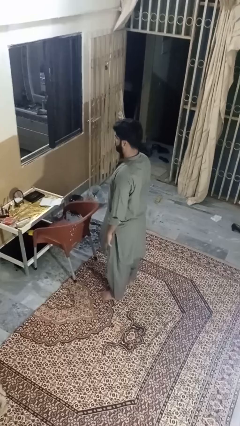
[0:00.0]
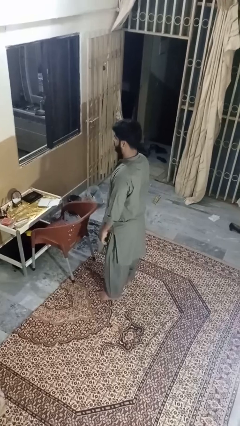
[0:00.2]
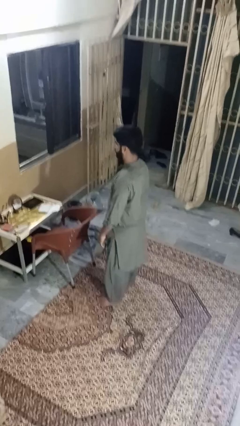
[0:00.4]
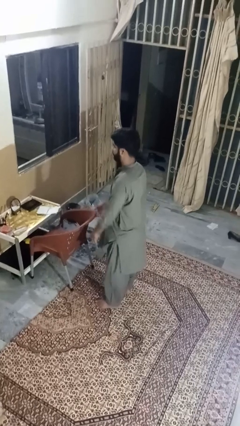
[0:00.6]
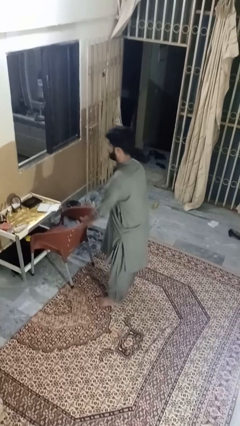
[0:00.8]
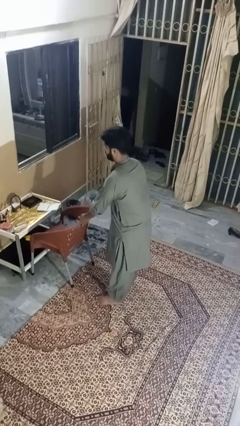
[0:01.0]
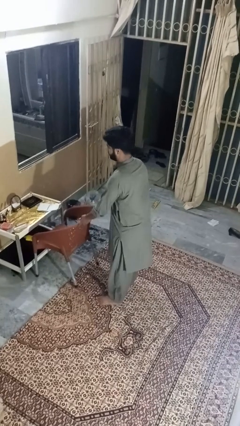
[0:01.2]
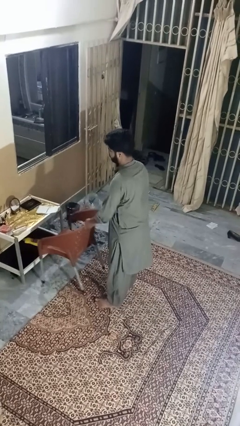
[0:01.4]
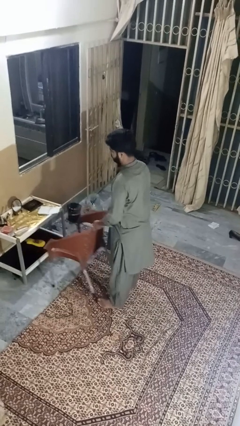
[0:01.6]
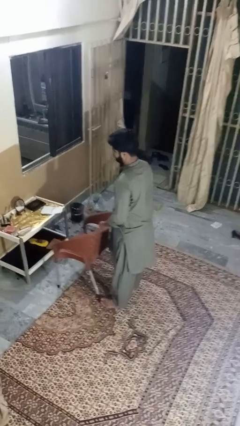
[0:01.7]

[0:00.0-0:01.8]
person pulls out chair

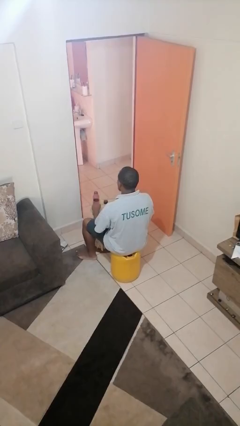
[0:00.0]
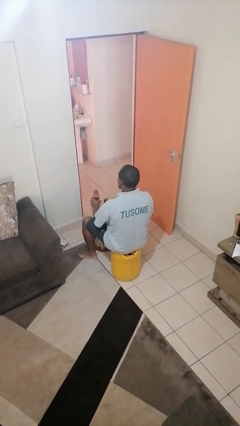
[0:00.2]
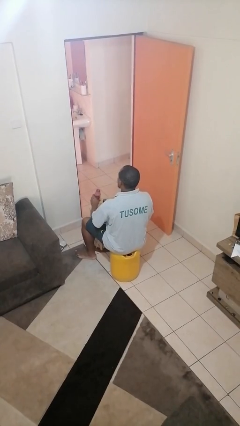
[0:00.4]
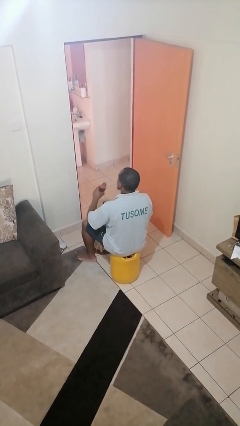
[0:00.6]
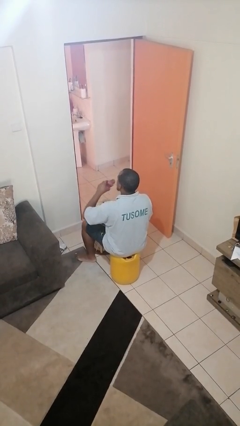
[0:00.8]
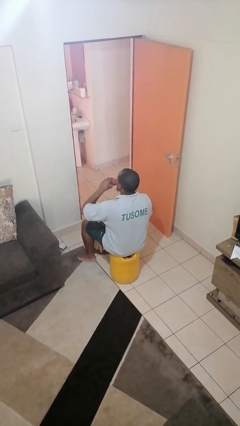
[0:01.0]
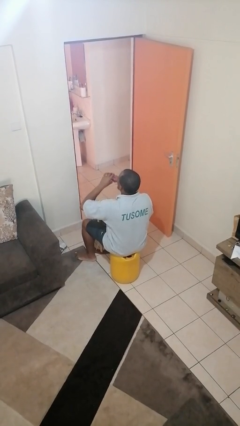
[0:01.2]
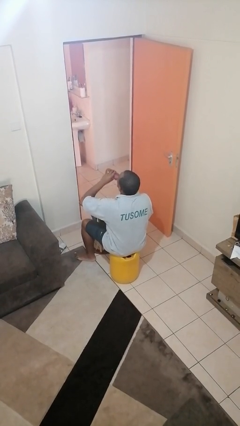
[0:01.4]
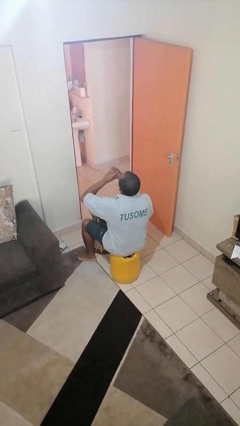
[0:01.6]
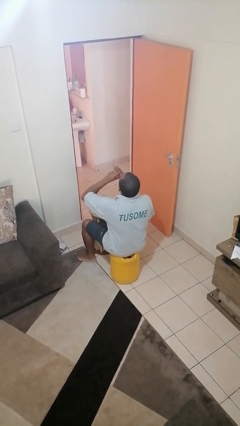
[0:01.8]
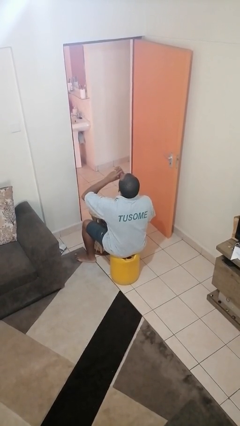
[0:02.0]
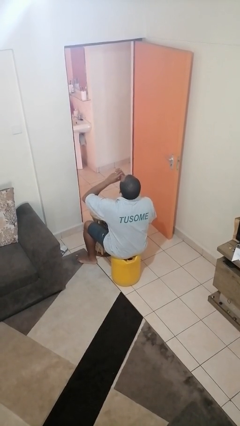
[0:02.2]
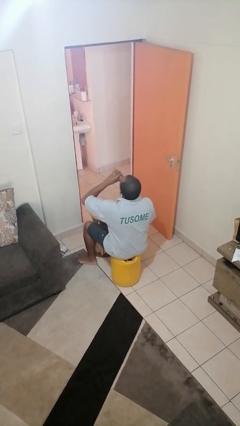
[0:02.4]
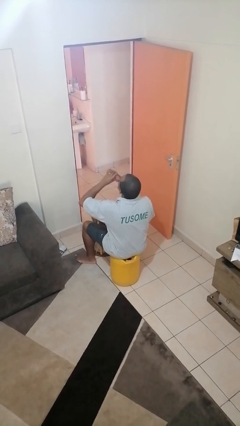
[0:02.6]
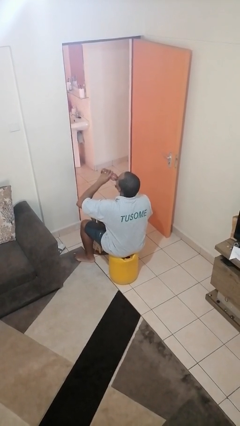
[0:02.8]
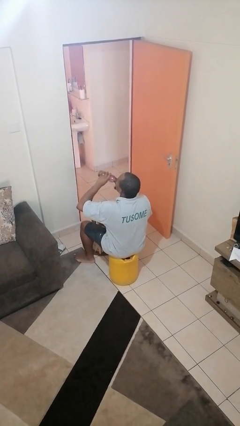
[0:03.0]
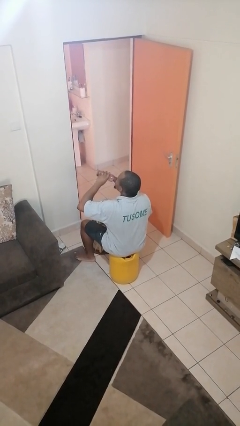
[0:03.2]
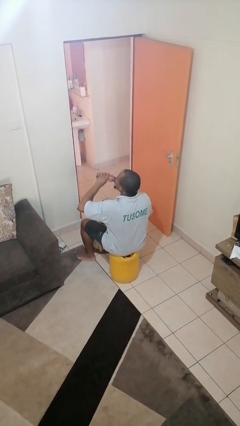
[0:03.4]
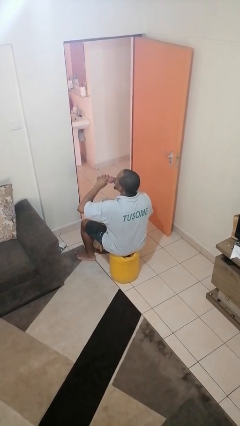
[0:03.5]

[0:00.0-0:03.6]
person drinks from bottle

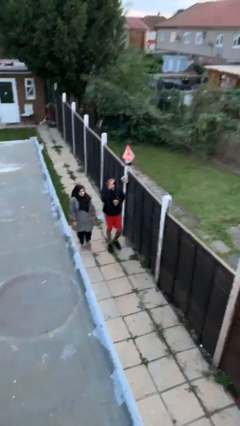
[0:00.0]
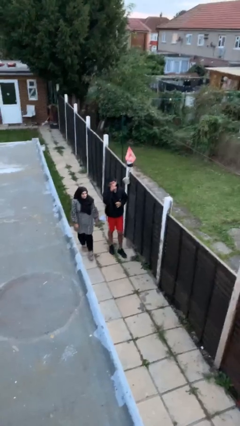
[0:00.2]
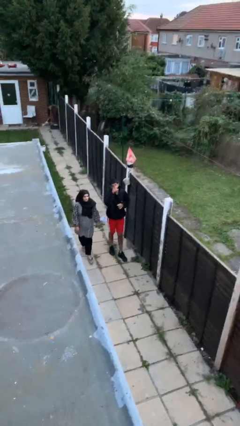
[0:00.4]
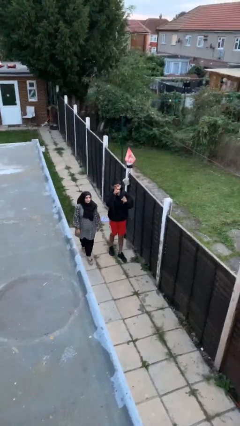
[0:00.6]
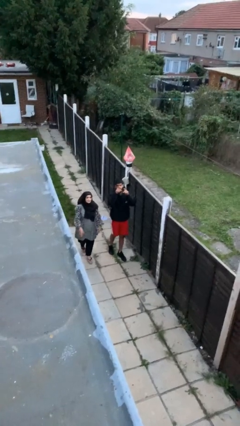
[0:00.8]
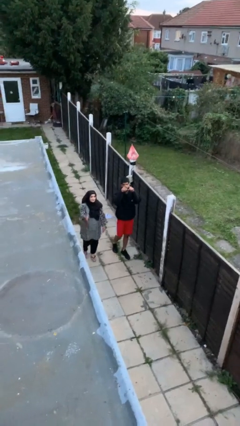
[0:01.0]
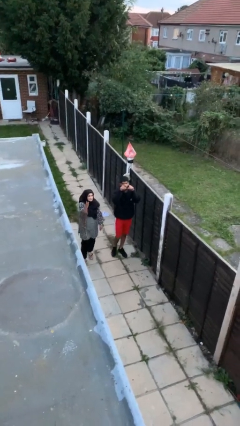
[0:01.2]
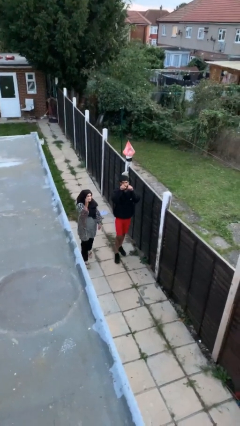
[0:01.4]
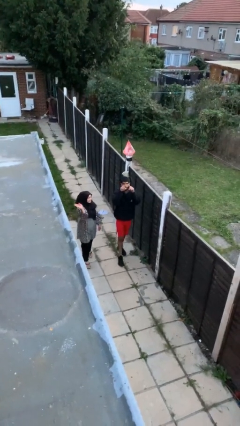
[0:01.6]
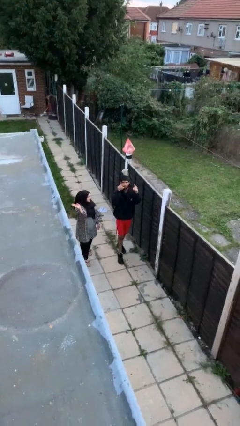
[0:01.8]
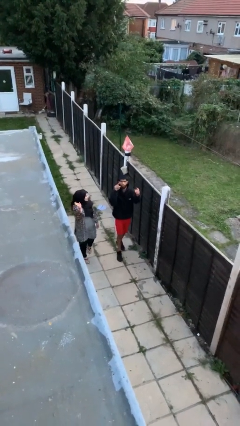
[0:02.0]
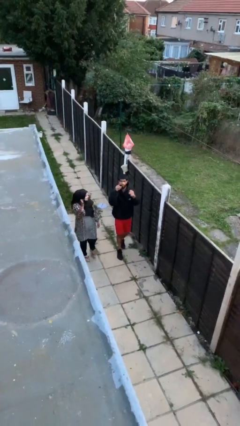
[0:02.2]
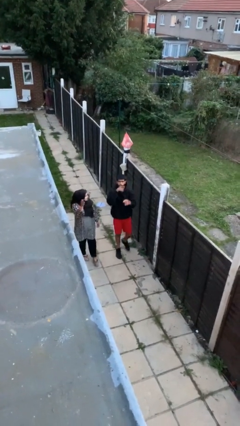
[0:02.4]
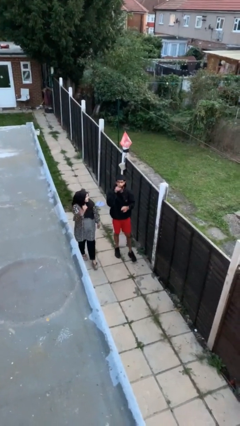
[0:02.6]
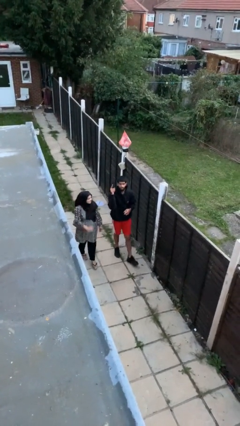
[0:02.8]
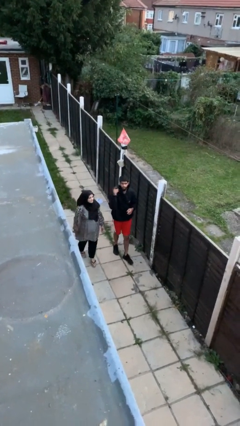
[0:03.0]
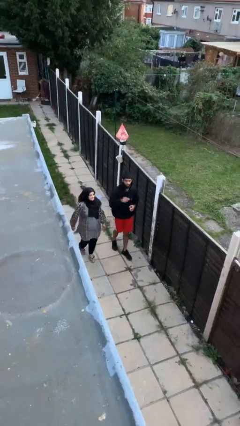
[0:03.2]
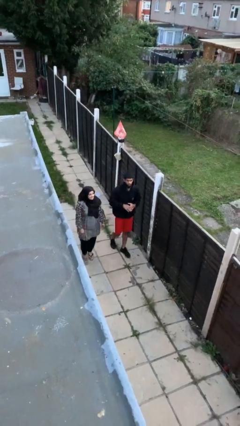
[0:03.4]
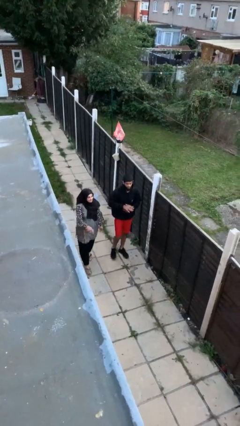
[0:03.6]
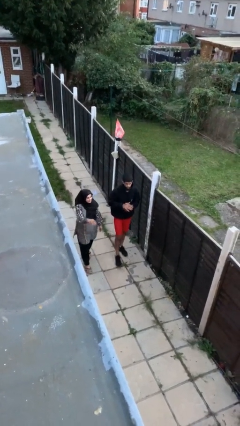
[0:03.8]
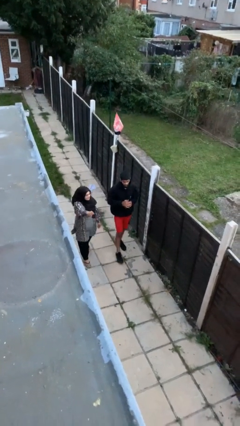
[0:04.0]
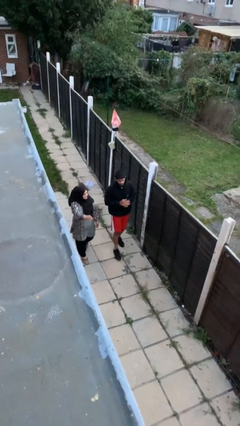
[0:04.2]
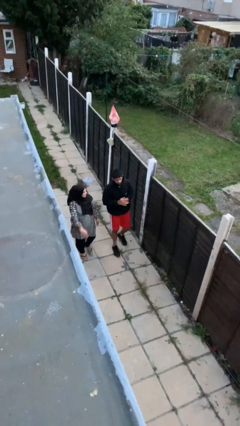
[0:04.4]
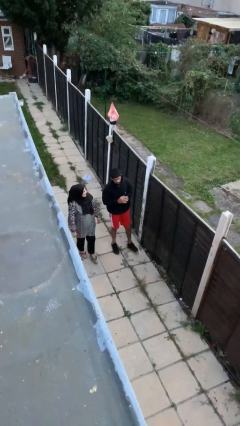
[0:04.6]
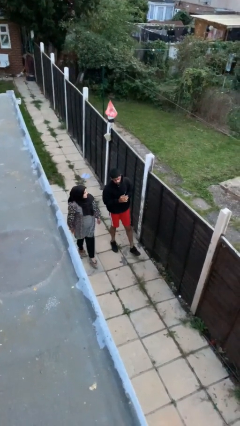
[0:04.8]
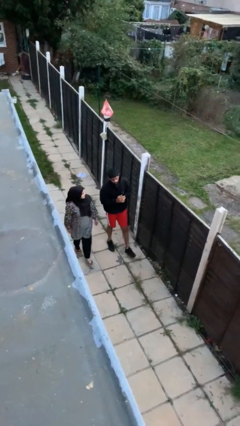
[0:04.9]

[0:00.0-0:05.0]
person talks to person

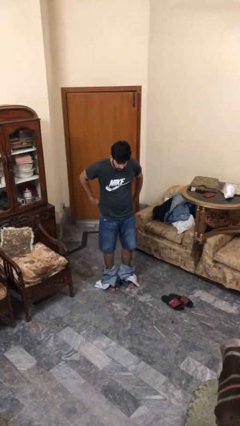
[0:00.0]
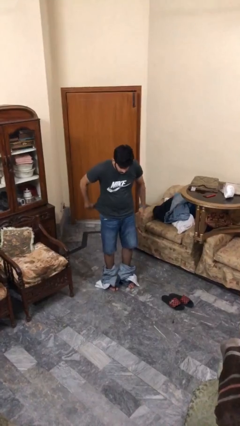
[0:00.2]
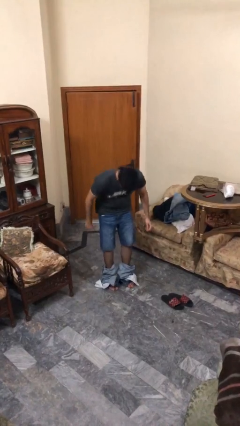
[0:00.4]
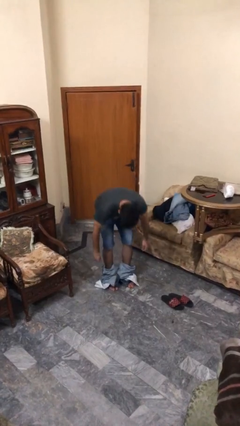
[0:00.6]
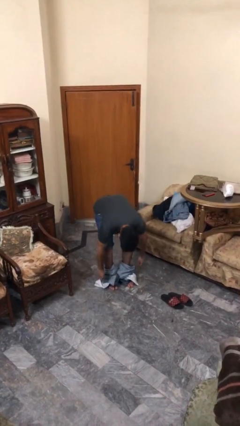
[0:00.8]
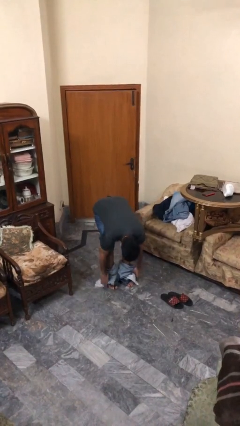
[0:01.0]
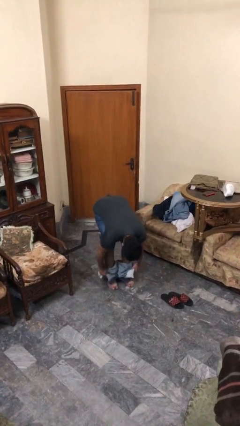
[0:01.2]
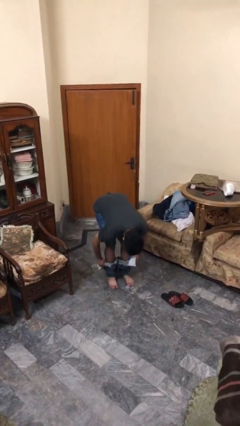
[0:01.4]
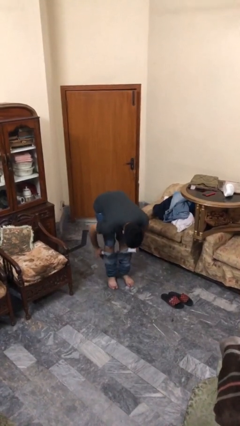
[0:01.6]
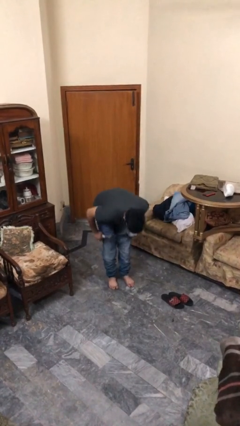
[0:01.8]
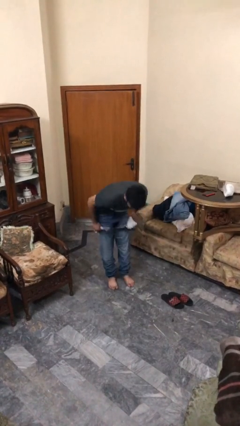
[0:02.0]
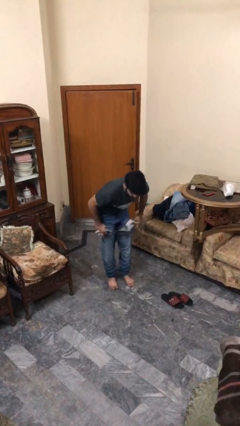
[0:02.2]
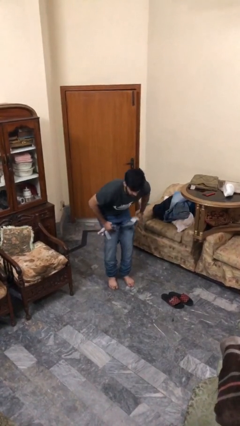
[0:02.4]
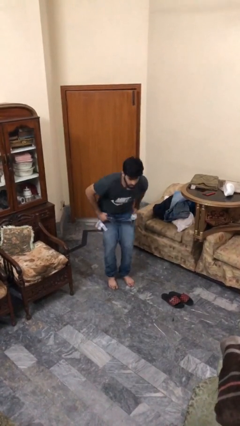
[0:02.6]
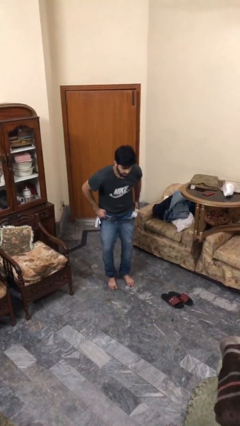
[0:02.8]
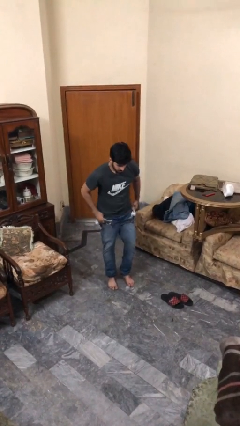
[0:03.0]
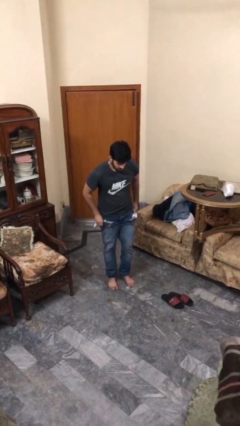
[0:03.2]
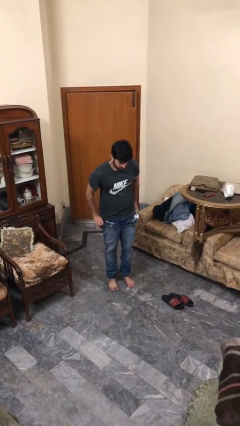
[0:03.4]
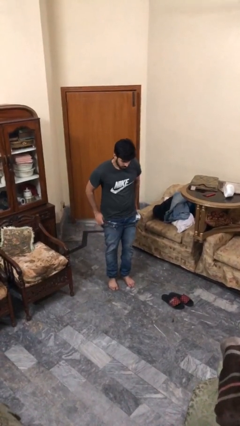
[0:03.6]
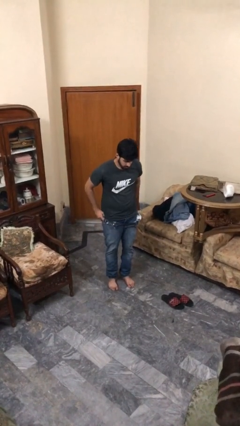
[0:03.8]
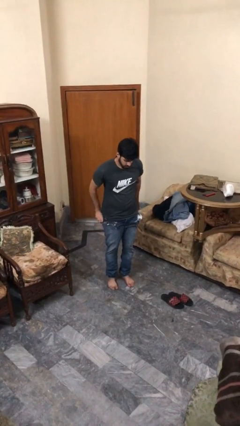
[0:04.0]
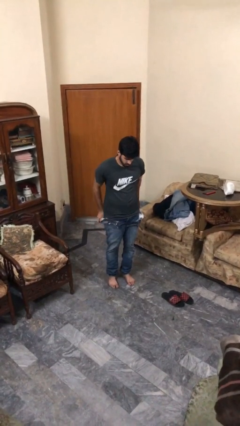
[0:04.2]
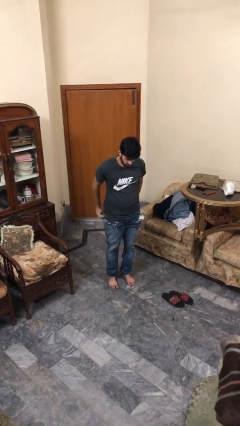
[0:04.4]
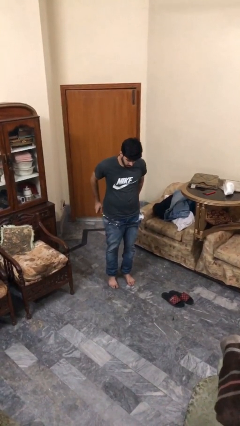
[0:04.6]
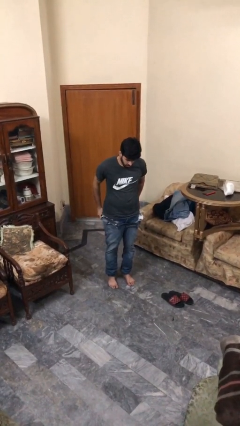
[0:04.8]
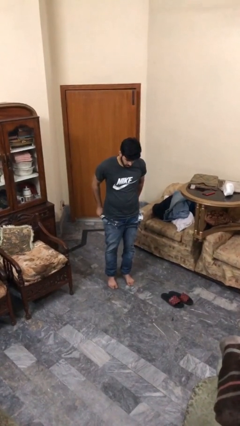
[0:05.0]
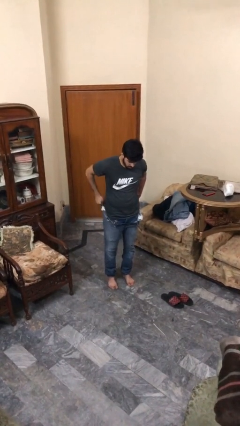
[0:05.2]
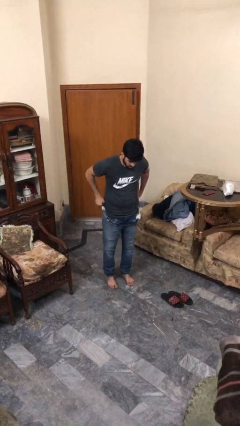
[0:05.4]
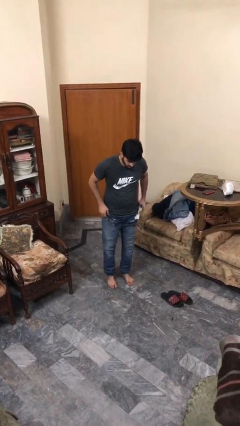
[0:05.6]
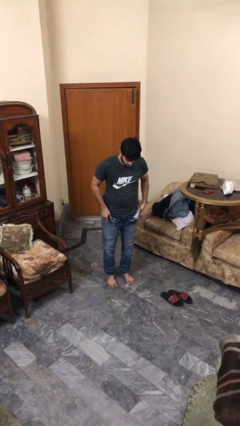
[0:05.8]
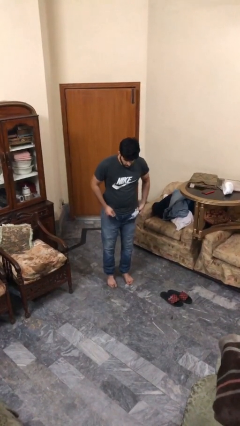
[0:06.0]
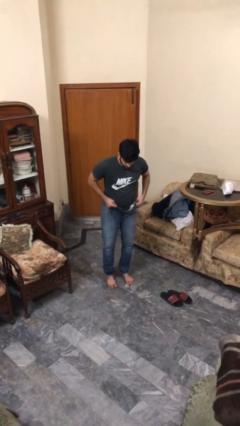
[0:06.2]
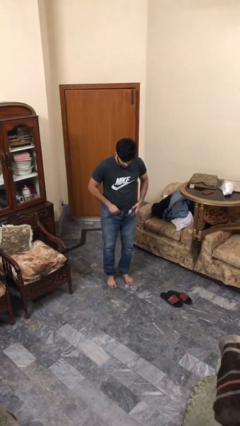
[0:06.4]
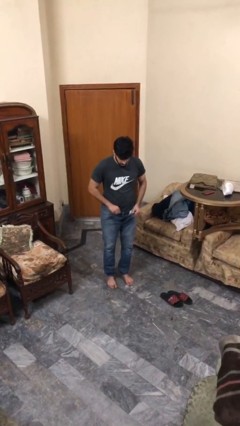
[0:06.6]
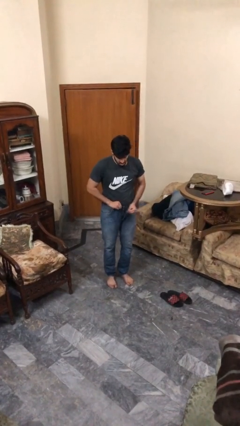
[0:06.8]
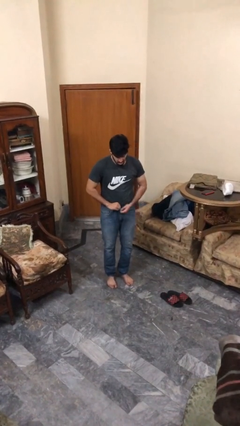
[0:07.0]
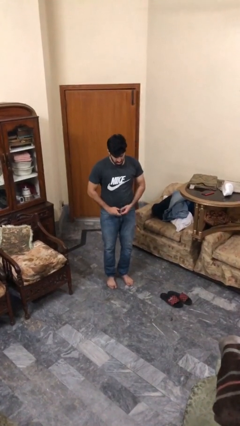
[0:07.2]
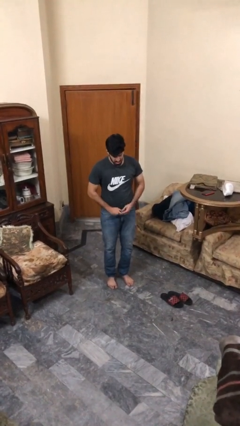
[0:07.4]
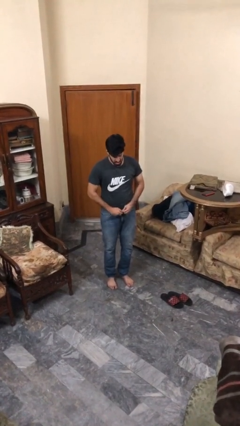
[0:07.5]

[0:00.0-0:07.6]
person puts on pants
